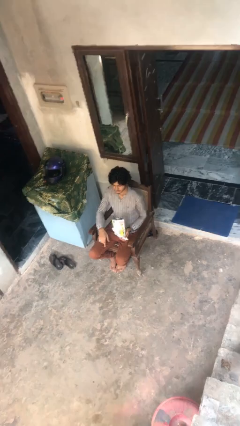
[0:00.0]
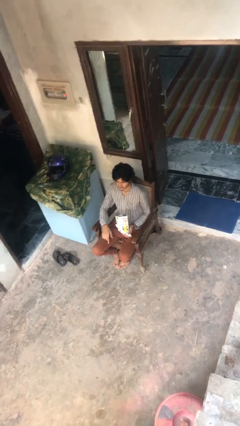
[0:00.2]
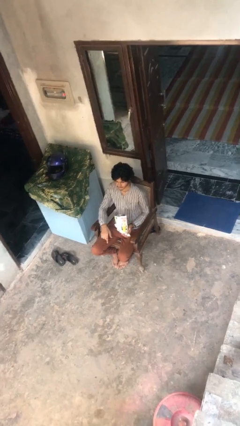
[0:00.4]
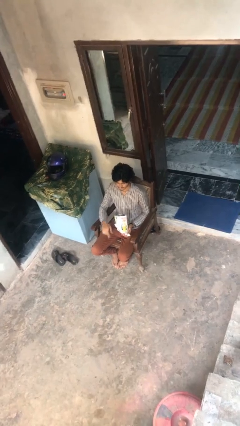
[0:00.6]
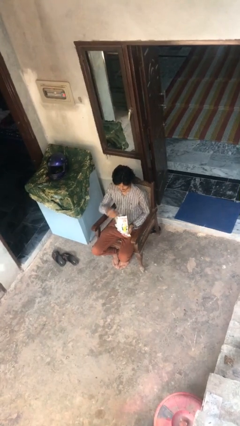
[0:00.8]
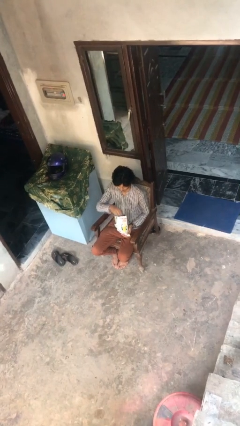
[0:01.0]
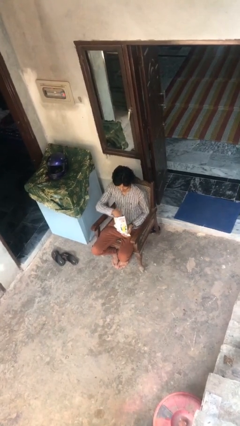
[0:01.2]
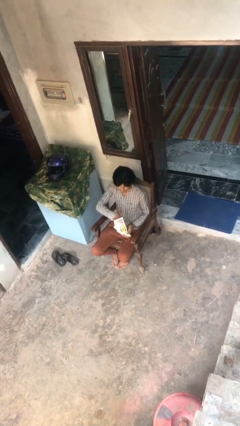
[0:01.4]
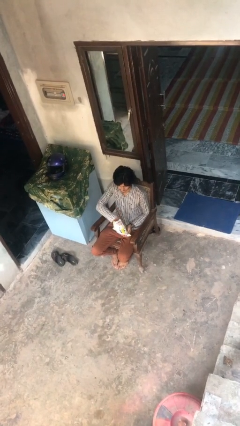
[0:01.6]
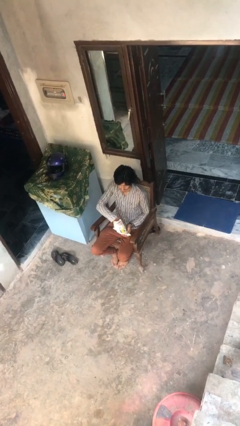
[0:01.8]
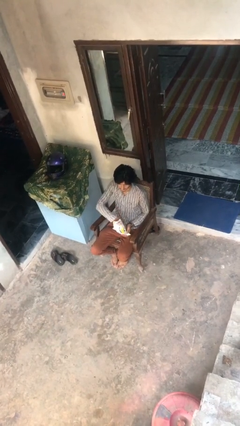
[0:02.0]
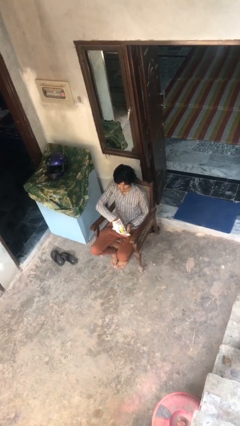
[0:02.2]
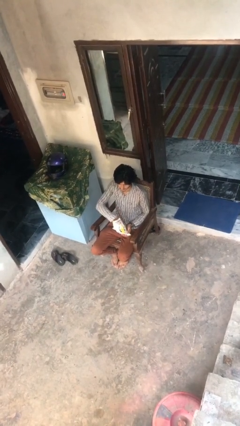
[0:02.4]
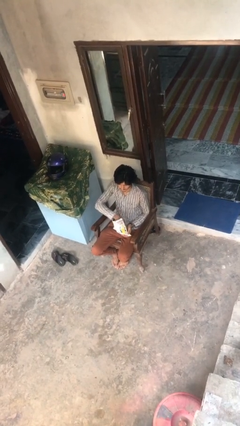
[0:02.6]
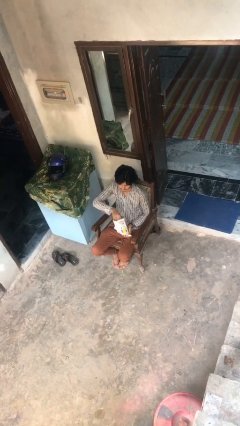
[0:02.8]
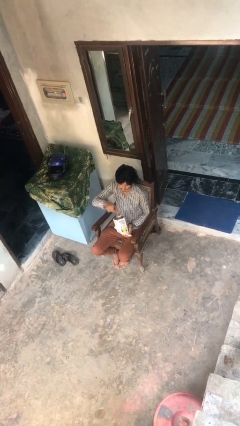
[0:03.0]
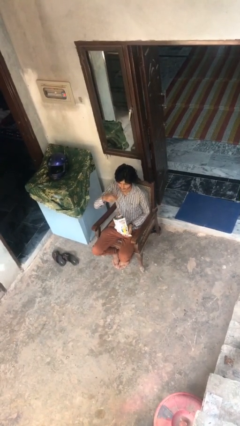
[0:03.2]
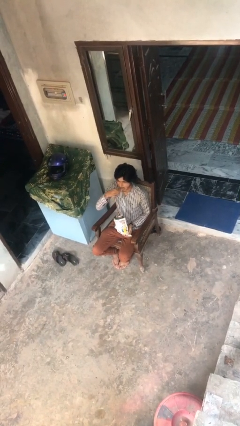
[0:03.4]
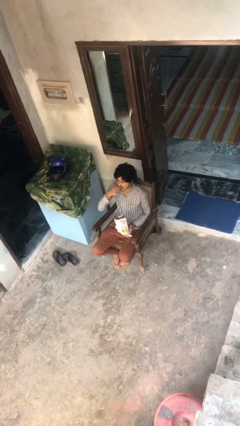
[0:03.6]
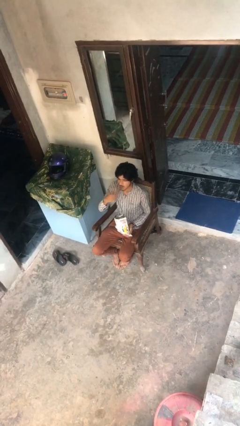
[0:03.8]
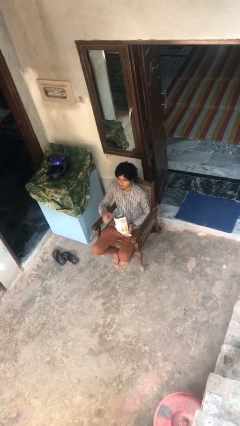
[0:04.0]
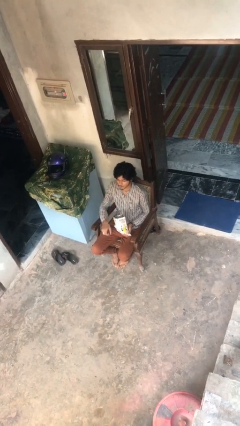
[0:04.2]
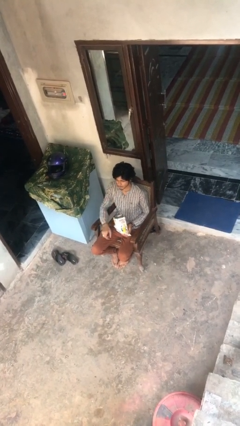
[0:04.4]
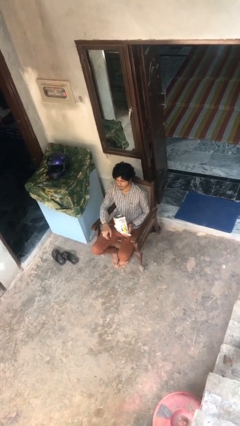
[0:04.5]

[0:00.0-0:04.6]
person eats snack from bag

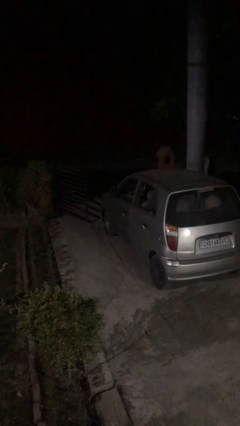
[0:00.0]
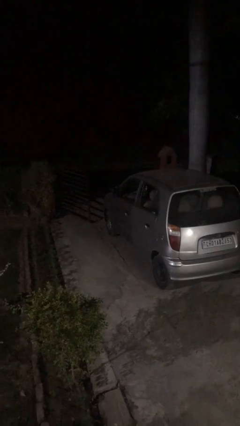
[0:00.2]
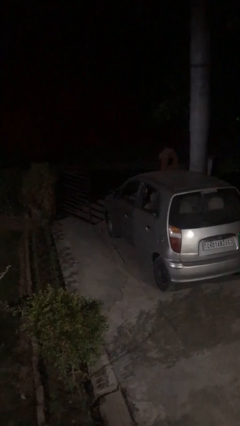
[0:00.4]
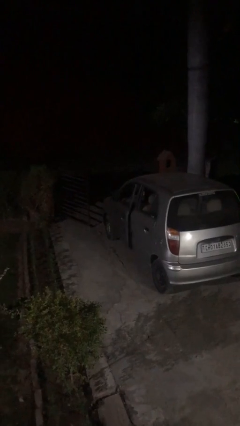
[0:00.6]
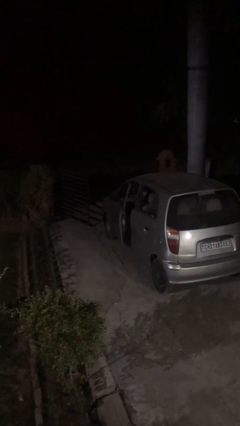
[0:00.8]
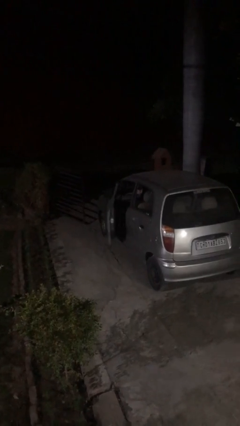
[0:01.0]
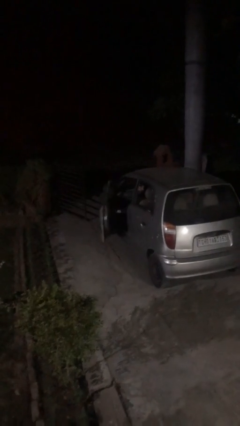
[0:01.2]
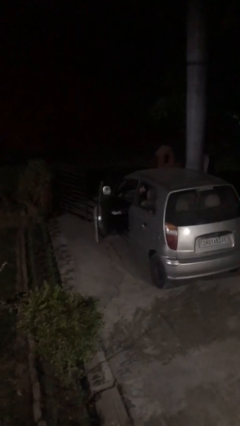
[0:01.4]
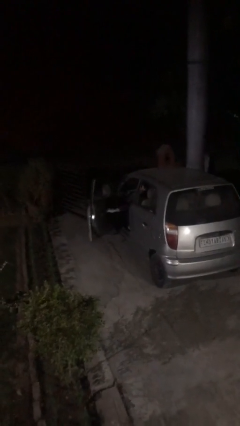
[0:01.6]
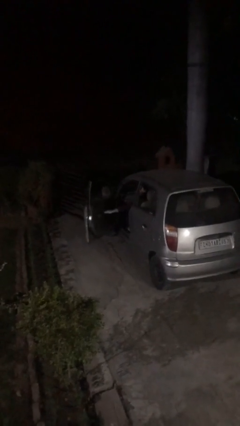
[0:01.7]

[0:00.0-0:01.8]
person opens car door

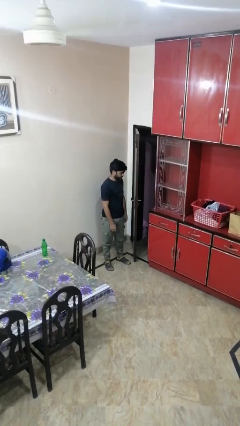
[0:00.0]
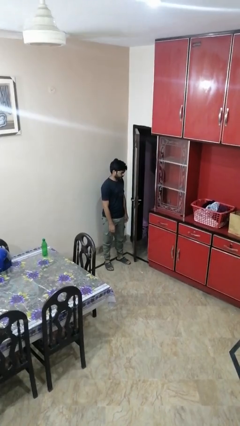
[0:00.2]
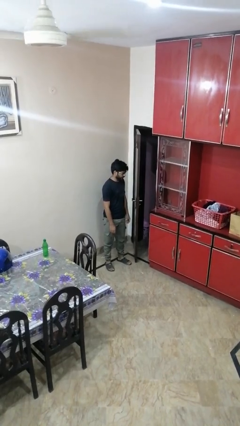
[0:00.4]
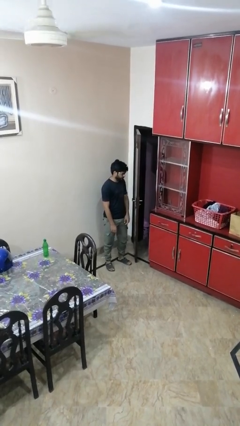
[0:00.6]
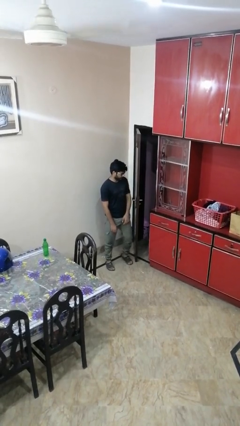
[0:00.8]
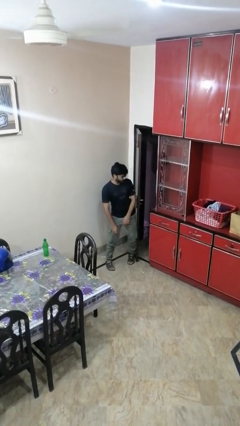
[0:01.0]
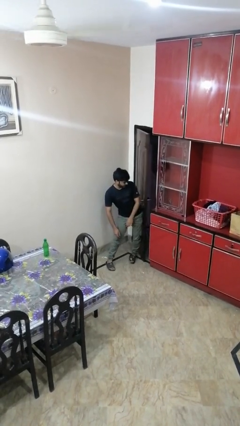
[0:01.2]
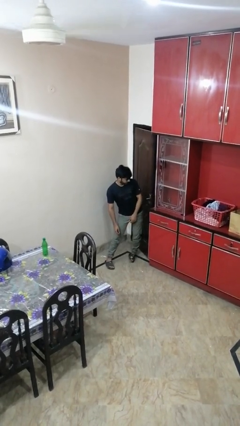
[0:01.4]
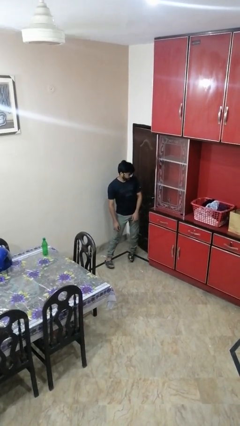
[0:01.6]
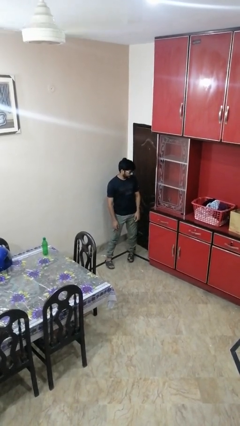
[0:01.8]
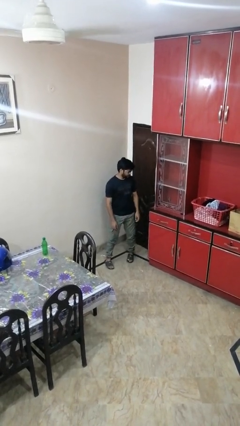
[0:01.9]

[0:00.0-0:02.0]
person closes door with hip

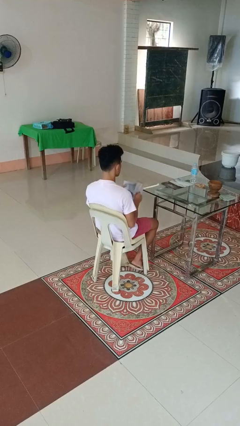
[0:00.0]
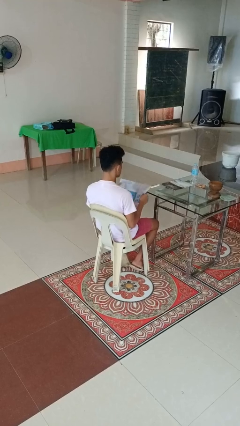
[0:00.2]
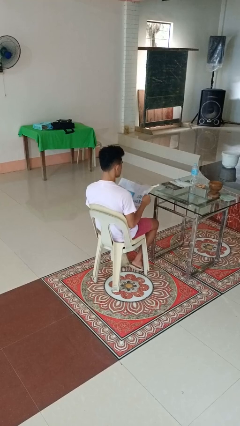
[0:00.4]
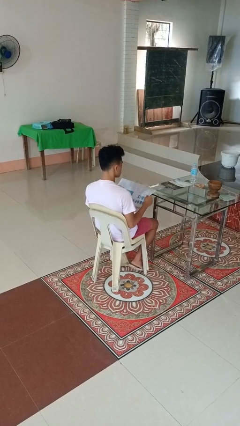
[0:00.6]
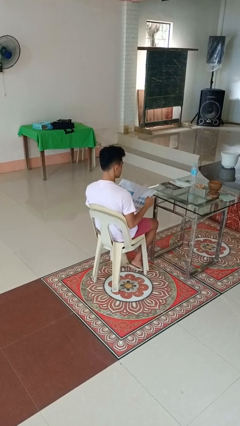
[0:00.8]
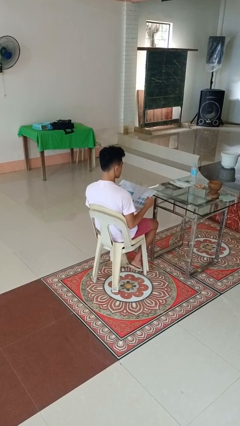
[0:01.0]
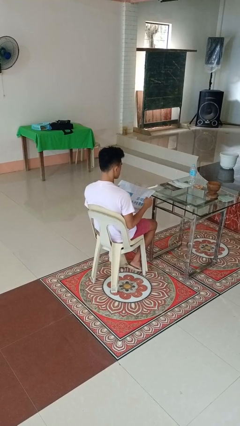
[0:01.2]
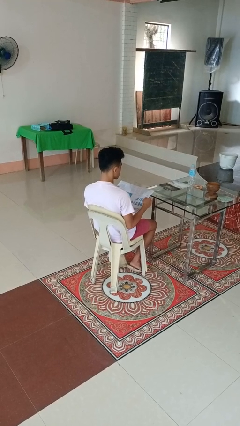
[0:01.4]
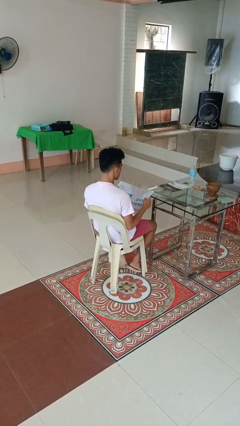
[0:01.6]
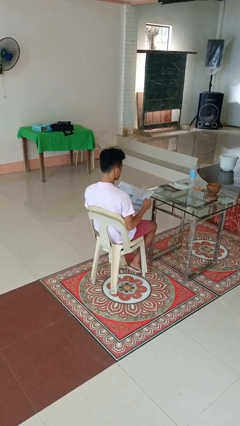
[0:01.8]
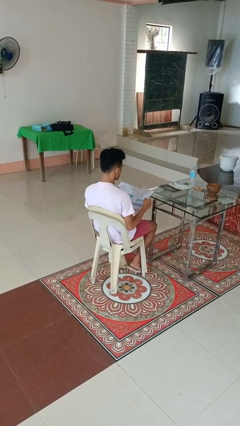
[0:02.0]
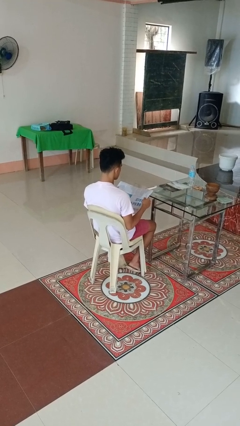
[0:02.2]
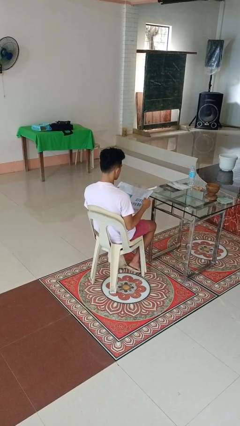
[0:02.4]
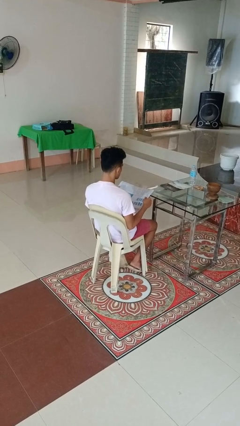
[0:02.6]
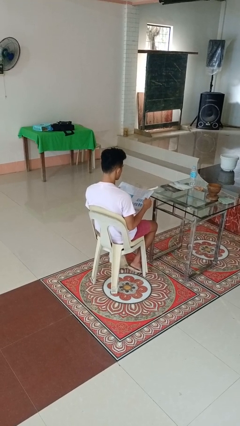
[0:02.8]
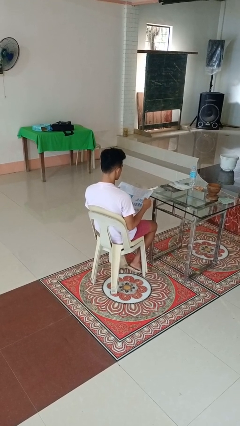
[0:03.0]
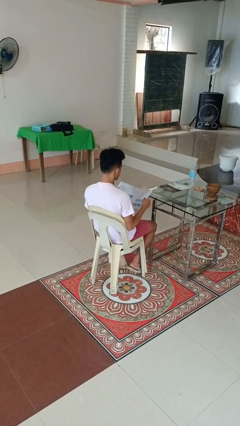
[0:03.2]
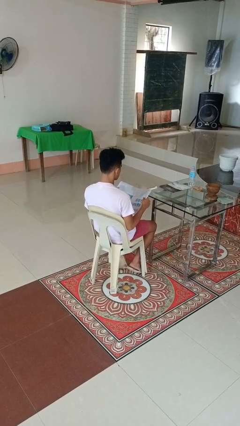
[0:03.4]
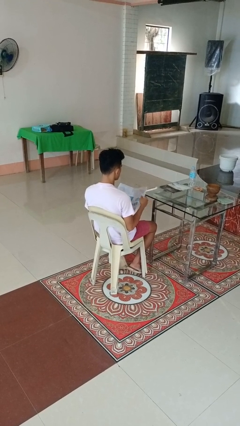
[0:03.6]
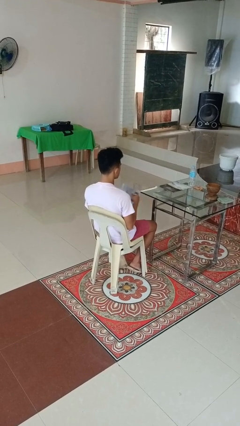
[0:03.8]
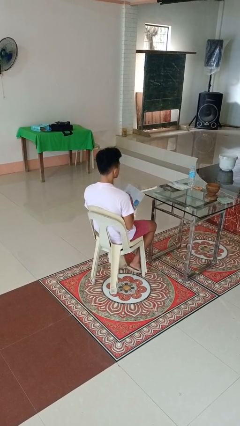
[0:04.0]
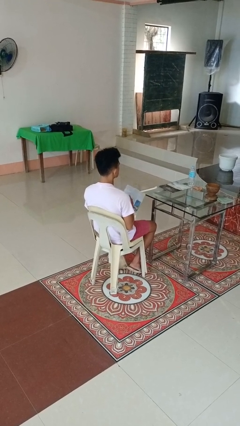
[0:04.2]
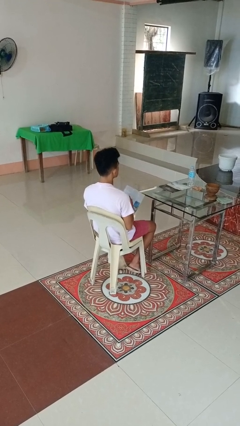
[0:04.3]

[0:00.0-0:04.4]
person reads newspaper

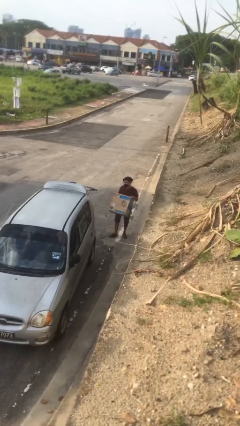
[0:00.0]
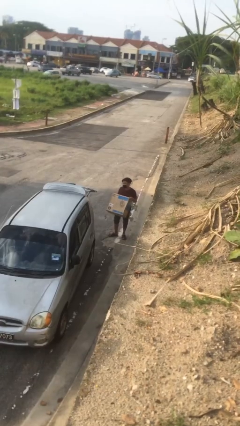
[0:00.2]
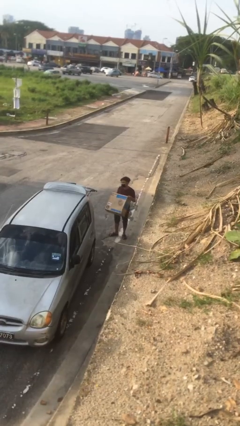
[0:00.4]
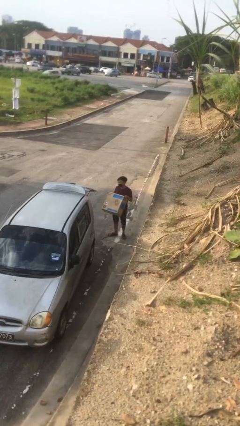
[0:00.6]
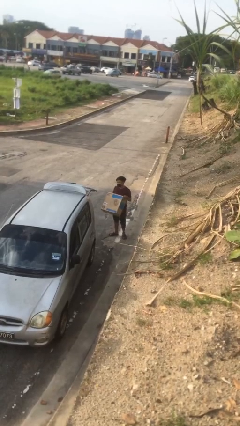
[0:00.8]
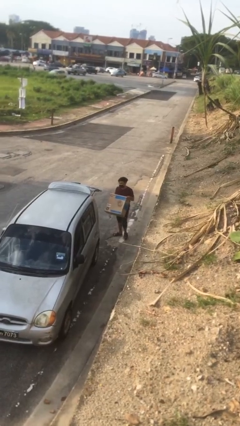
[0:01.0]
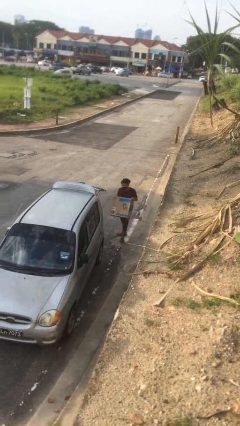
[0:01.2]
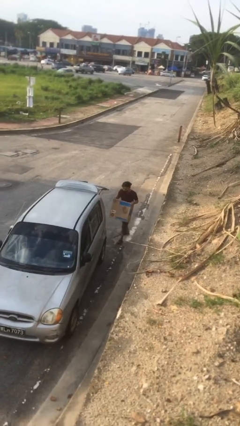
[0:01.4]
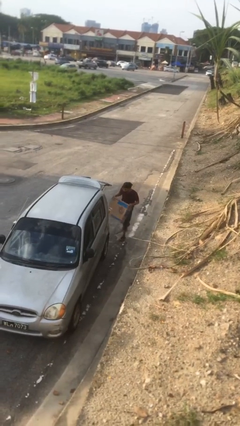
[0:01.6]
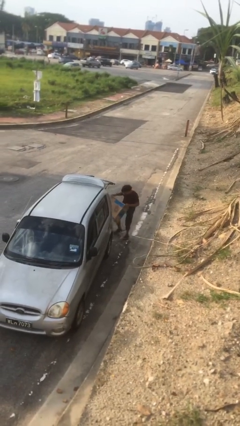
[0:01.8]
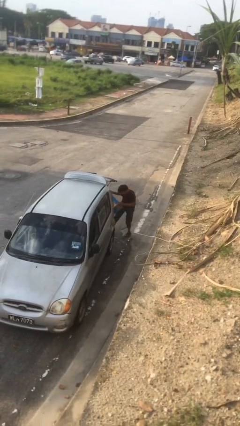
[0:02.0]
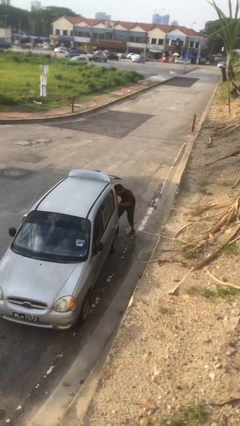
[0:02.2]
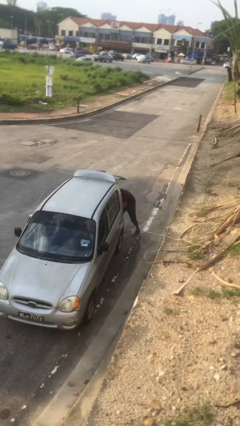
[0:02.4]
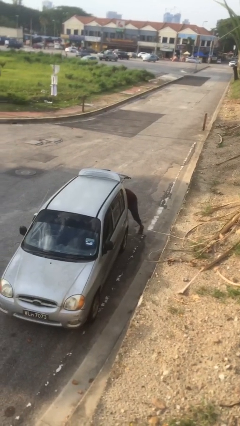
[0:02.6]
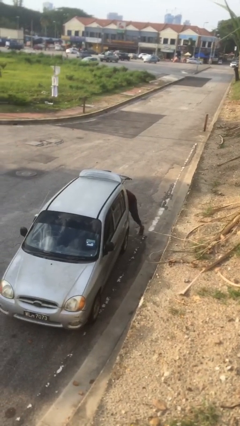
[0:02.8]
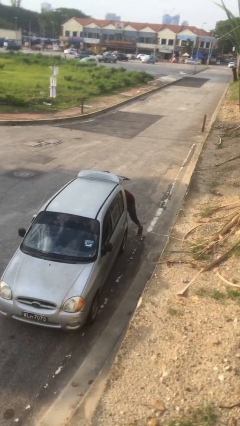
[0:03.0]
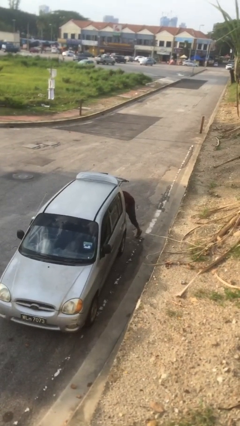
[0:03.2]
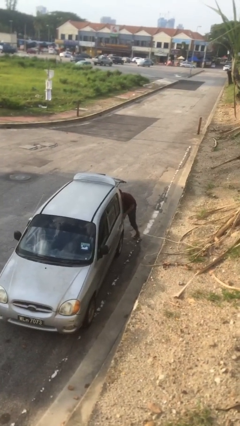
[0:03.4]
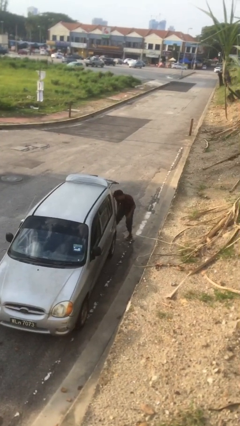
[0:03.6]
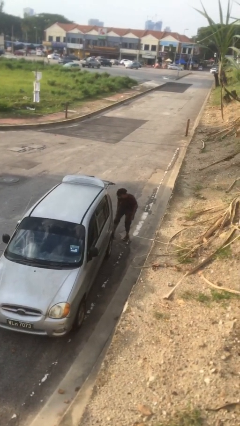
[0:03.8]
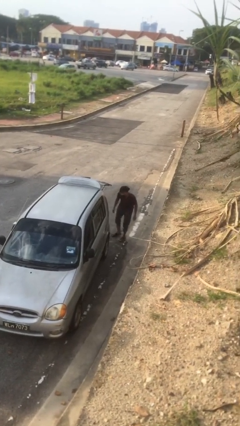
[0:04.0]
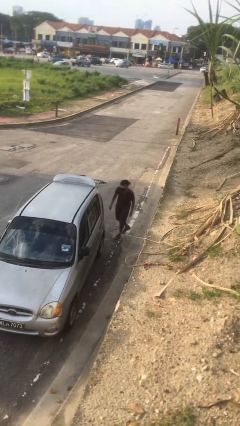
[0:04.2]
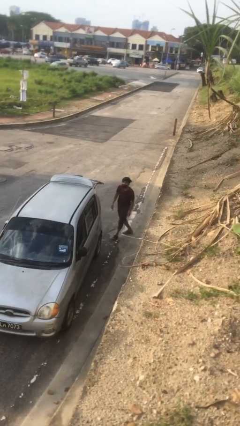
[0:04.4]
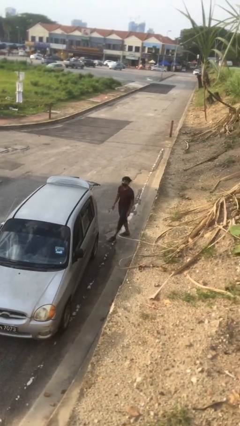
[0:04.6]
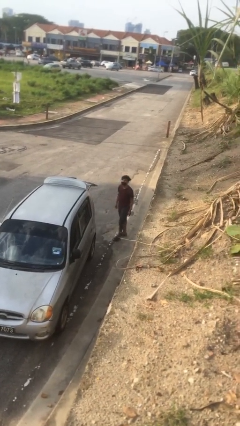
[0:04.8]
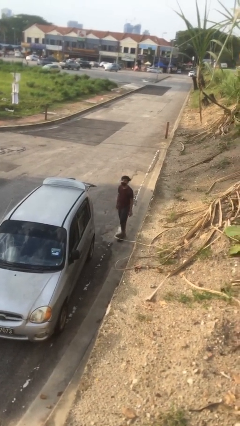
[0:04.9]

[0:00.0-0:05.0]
person loads car
